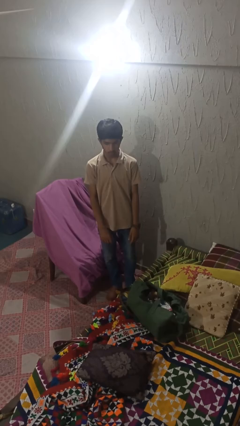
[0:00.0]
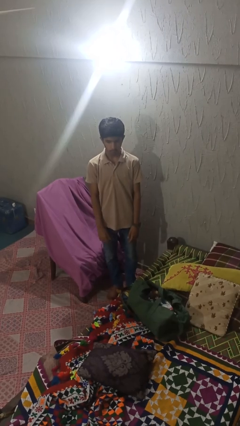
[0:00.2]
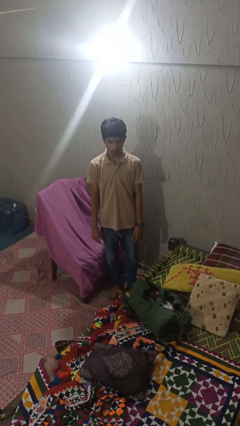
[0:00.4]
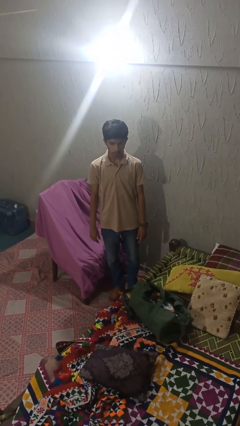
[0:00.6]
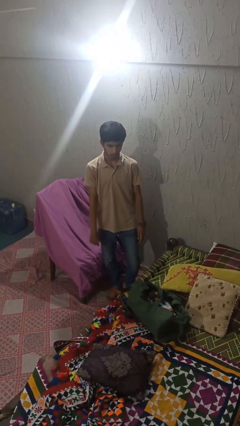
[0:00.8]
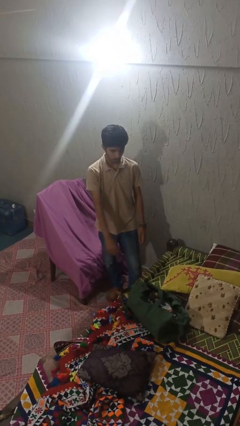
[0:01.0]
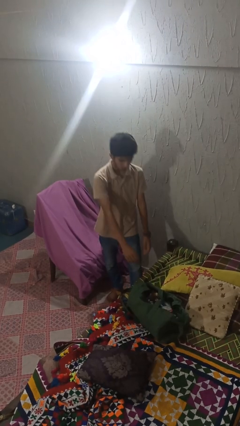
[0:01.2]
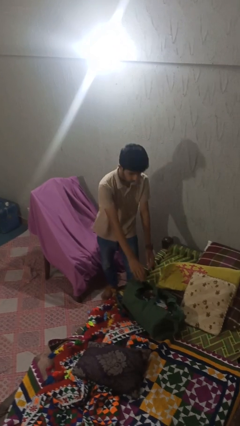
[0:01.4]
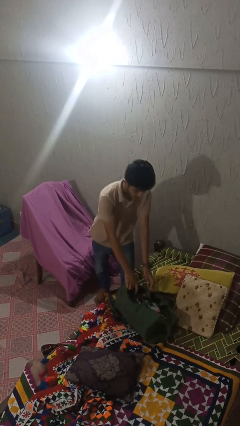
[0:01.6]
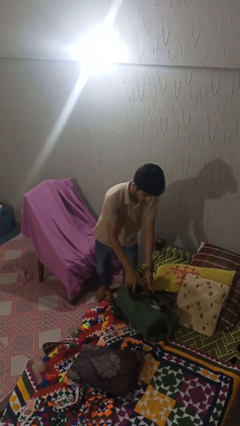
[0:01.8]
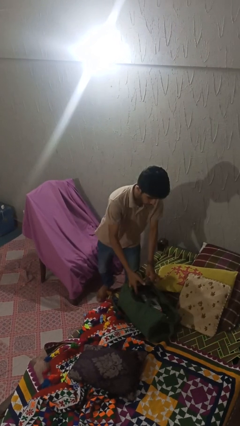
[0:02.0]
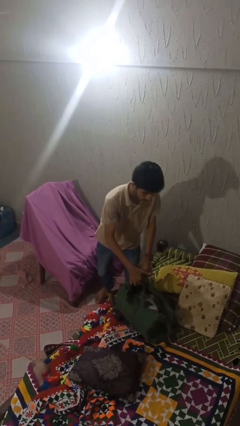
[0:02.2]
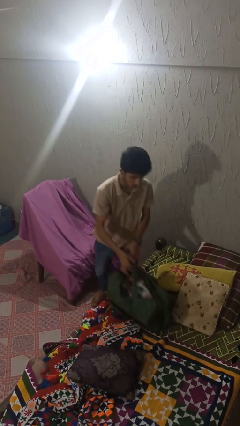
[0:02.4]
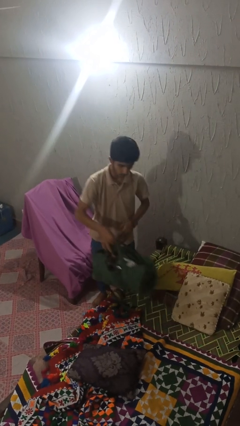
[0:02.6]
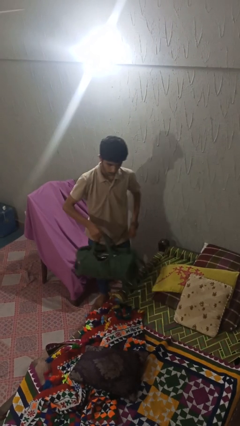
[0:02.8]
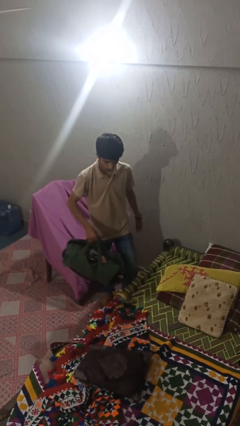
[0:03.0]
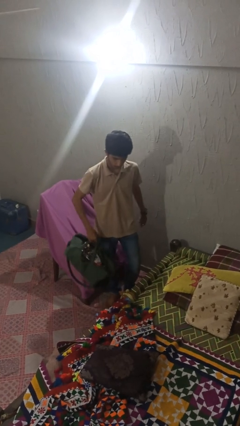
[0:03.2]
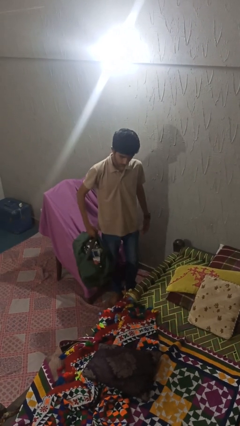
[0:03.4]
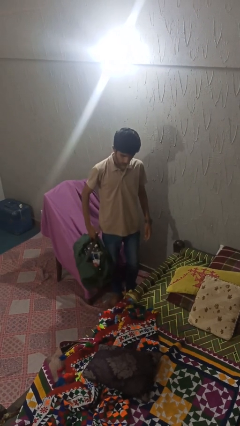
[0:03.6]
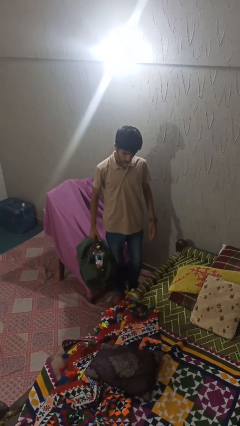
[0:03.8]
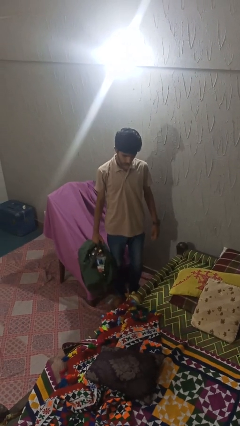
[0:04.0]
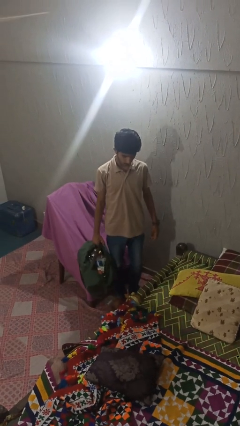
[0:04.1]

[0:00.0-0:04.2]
person picks up object from bed

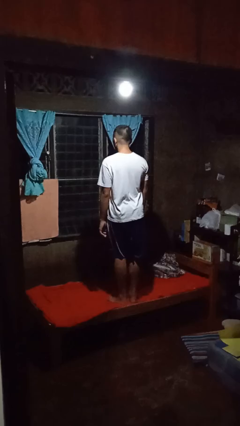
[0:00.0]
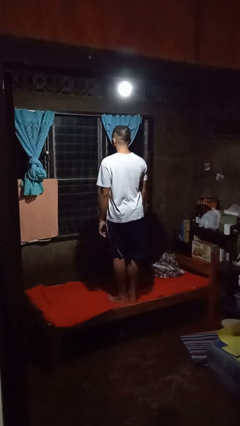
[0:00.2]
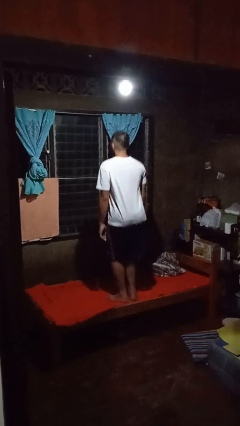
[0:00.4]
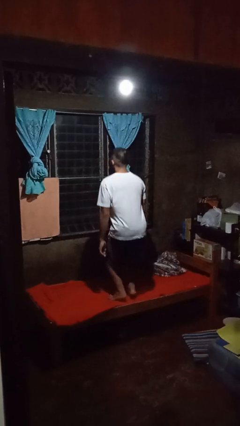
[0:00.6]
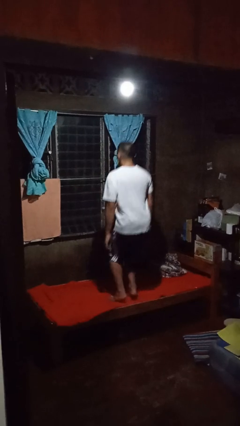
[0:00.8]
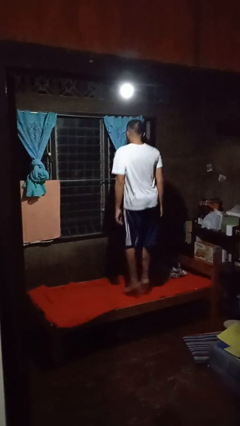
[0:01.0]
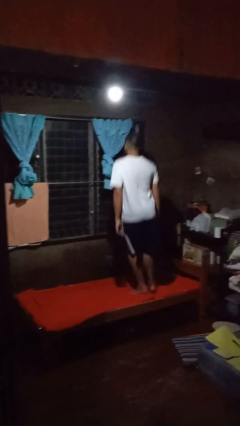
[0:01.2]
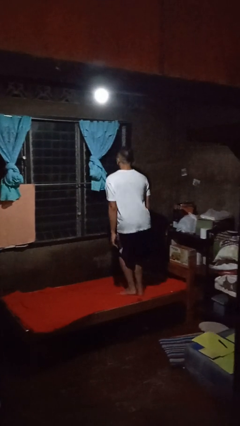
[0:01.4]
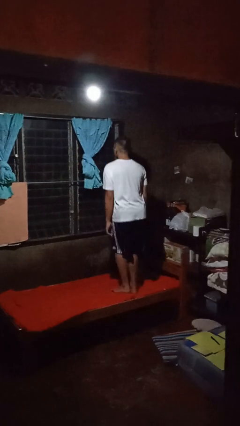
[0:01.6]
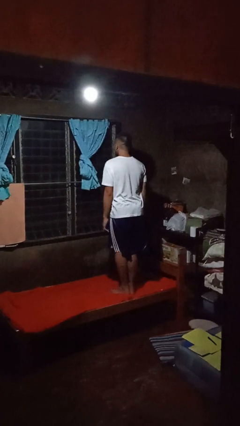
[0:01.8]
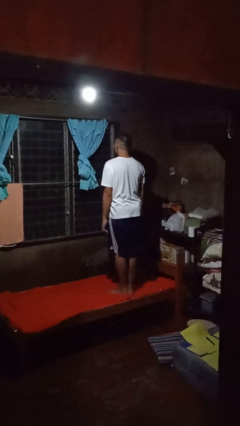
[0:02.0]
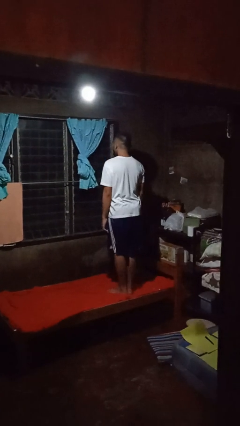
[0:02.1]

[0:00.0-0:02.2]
person jumps on bed

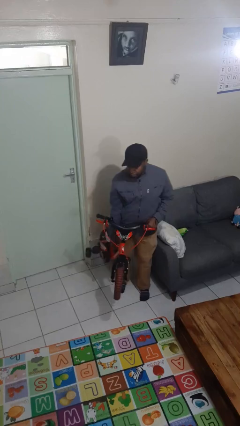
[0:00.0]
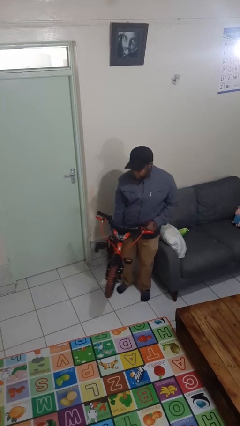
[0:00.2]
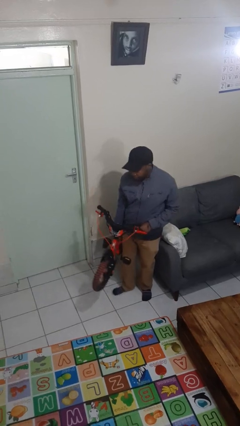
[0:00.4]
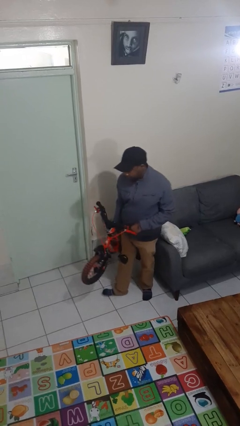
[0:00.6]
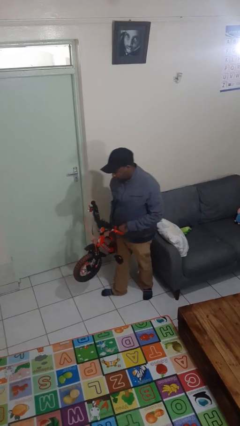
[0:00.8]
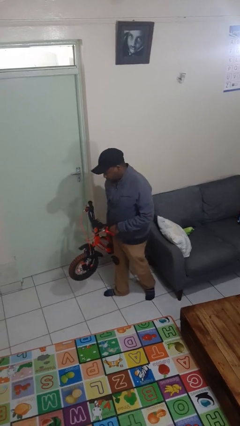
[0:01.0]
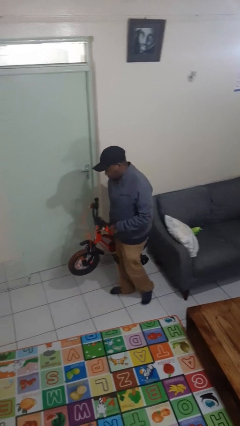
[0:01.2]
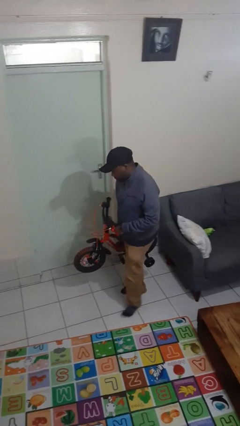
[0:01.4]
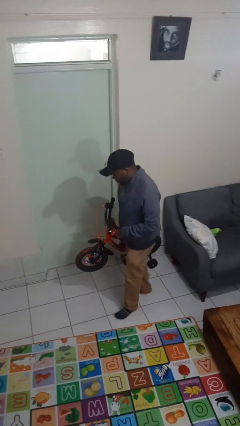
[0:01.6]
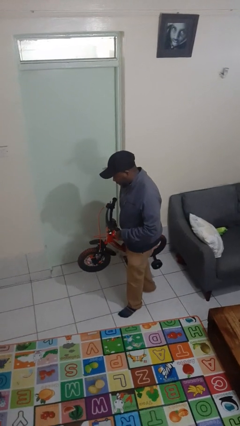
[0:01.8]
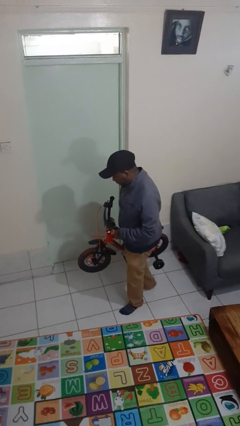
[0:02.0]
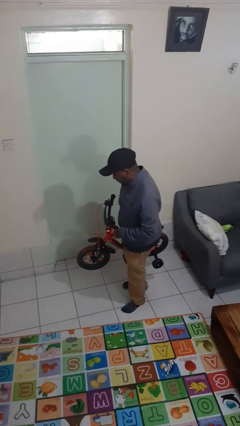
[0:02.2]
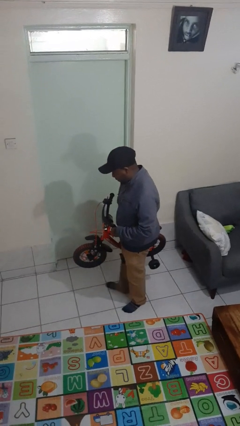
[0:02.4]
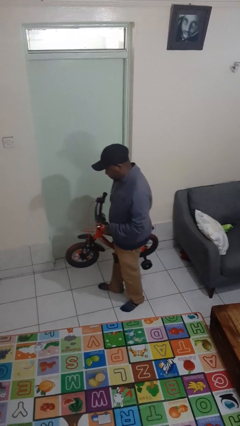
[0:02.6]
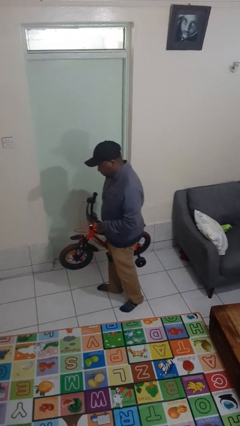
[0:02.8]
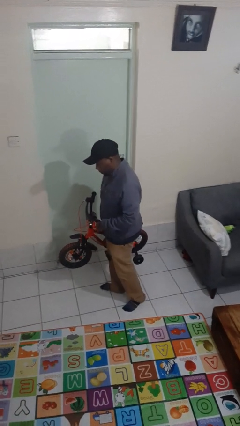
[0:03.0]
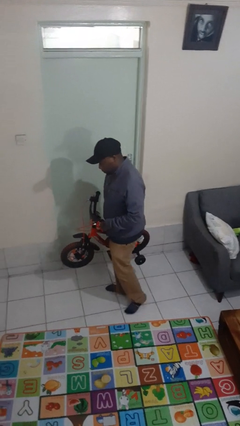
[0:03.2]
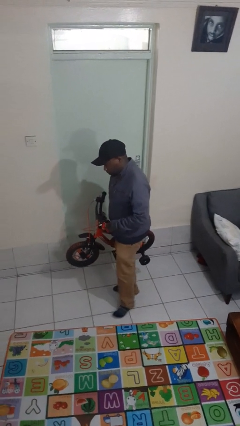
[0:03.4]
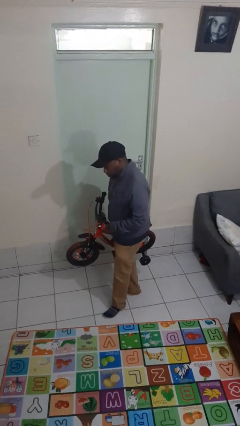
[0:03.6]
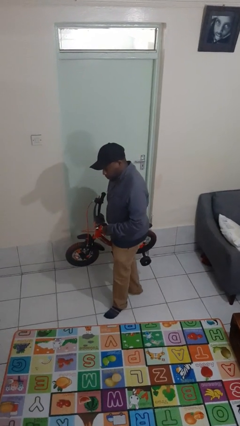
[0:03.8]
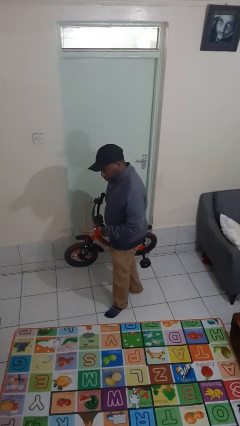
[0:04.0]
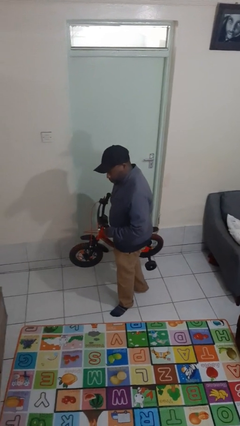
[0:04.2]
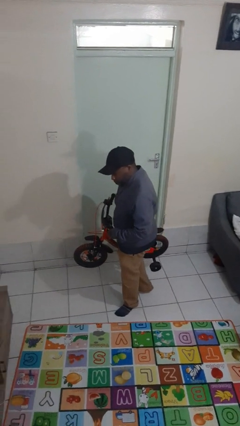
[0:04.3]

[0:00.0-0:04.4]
person carries bicycle

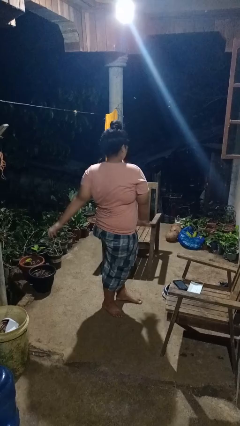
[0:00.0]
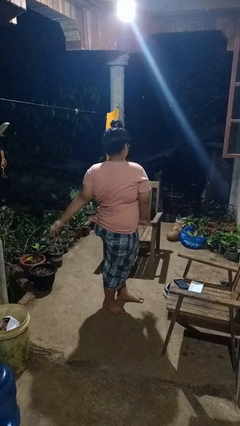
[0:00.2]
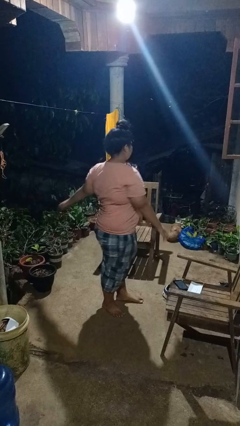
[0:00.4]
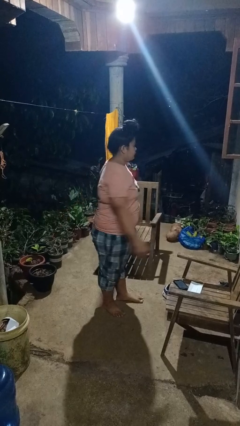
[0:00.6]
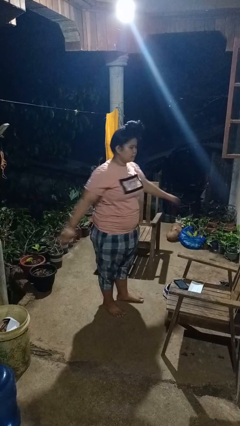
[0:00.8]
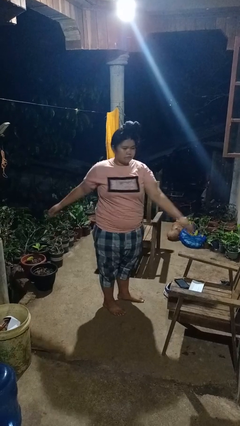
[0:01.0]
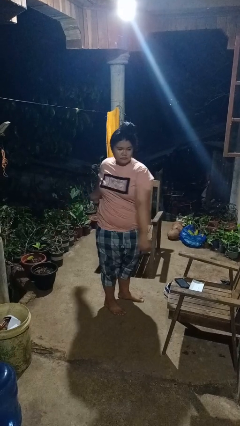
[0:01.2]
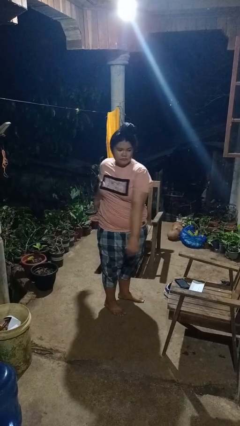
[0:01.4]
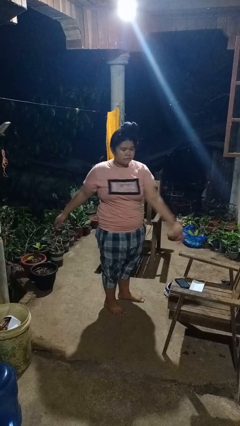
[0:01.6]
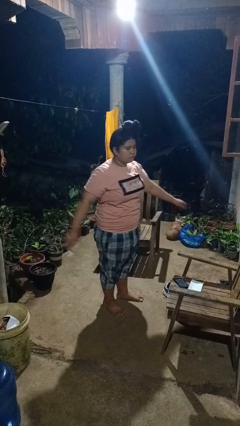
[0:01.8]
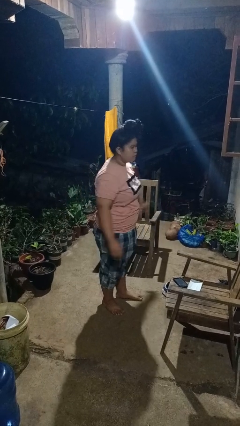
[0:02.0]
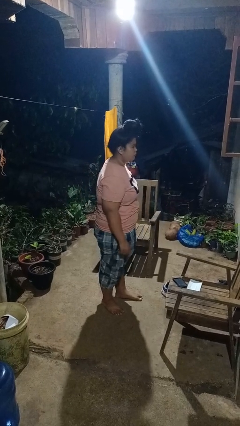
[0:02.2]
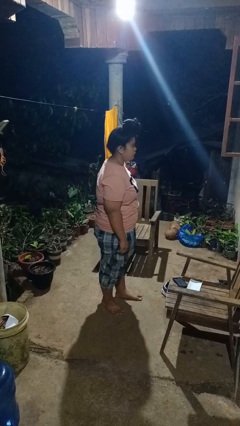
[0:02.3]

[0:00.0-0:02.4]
person stretches arms to side

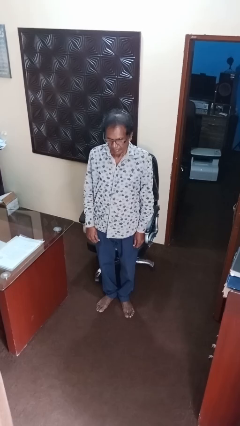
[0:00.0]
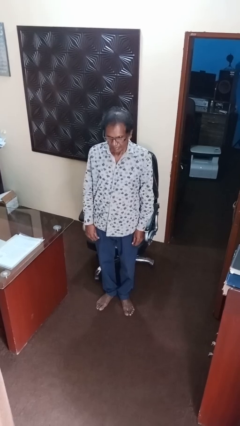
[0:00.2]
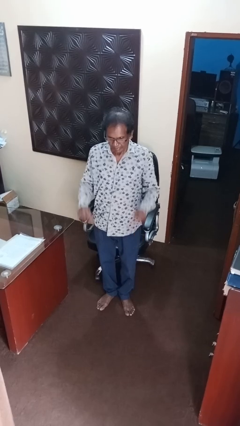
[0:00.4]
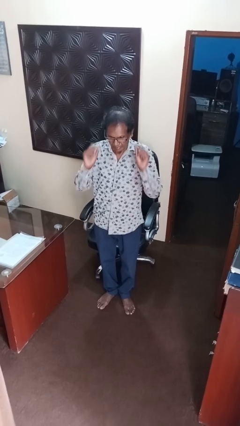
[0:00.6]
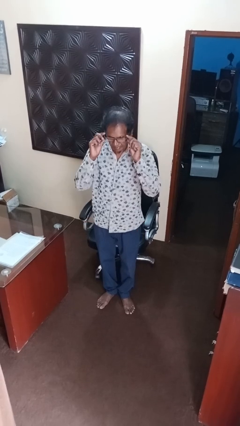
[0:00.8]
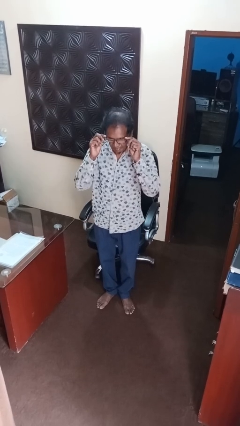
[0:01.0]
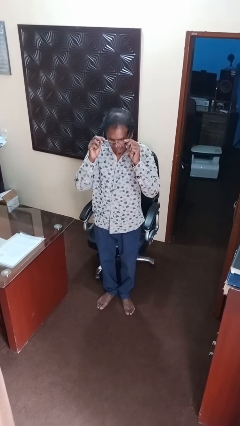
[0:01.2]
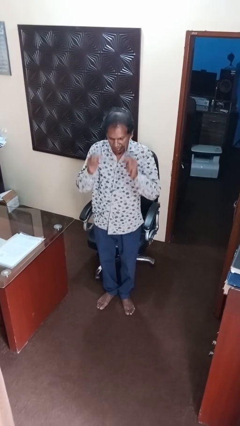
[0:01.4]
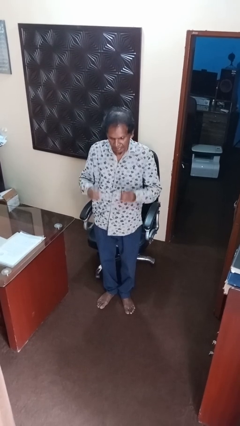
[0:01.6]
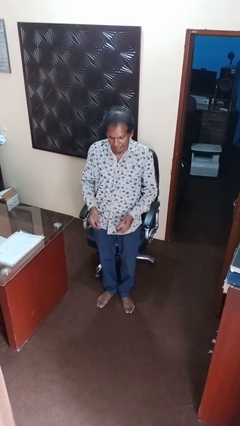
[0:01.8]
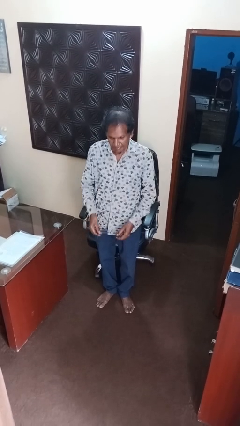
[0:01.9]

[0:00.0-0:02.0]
person takes off glasses

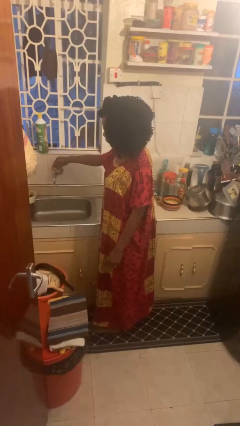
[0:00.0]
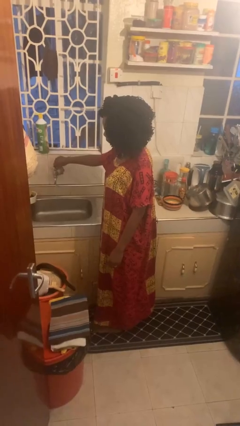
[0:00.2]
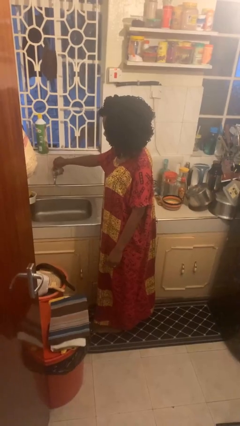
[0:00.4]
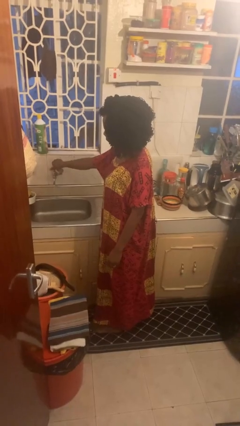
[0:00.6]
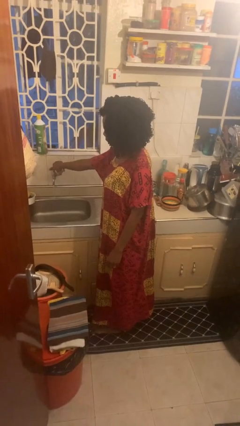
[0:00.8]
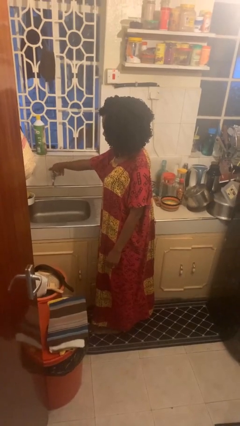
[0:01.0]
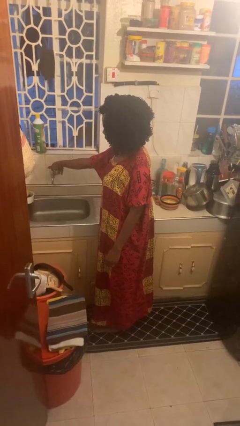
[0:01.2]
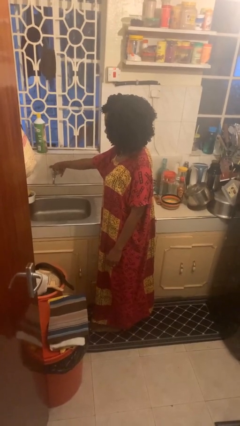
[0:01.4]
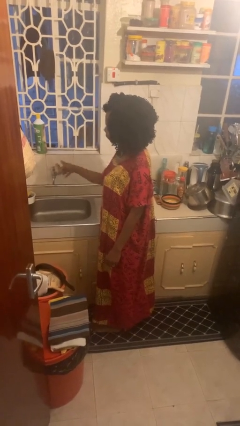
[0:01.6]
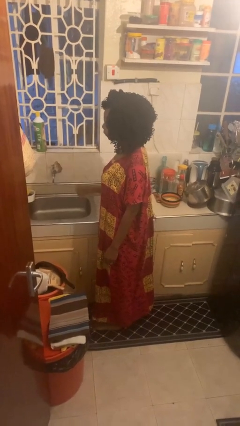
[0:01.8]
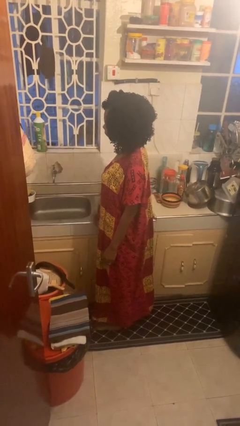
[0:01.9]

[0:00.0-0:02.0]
person turns off faucet

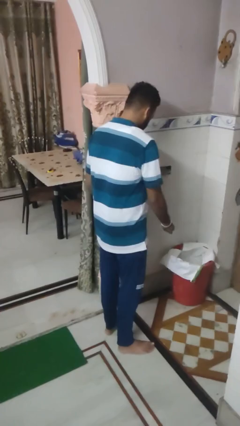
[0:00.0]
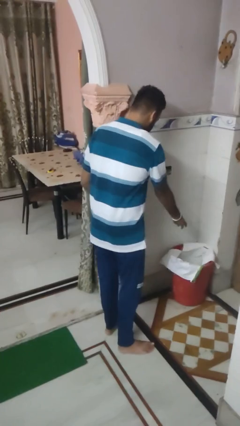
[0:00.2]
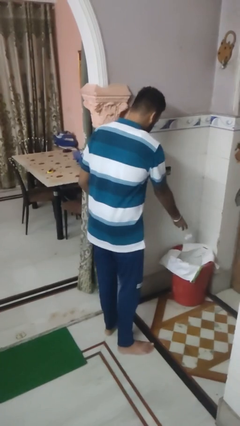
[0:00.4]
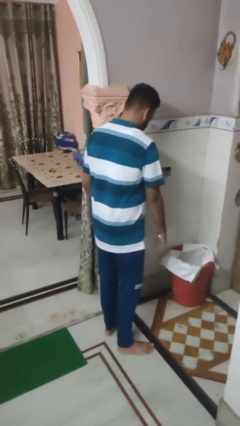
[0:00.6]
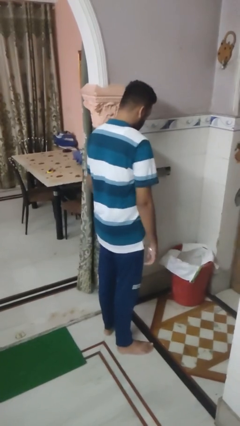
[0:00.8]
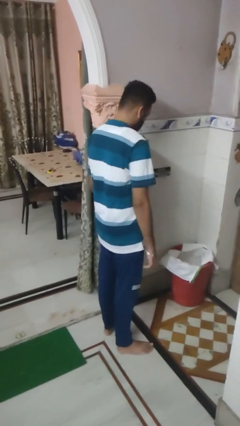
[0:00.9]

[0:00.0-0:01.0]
person discards trash
